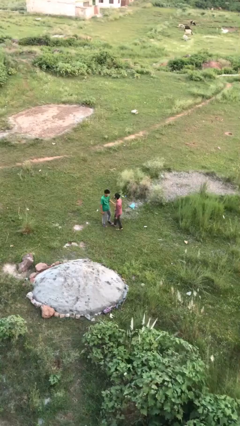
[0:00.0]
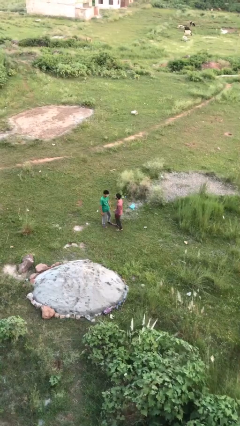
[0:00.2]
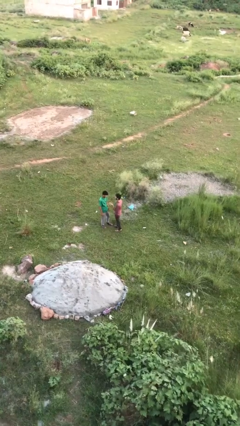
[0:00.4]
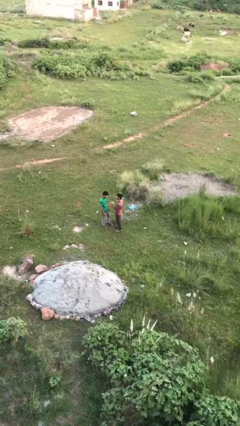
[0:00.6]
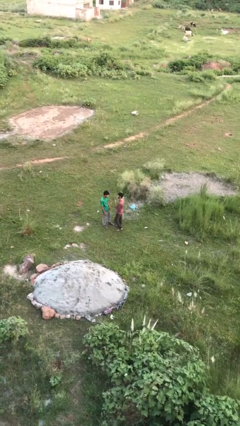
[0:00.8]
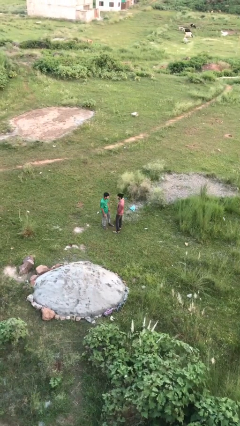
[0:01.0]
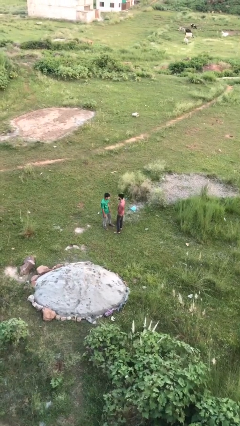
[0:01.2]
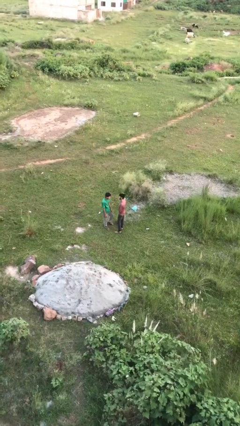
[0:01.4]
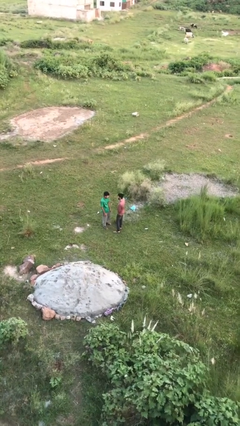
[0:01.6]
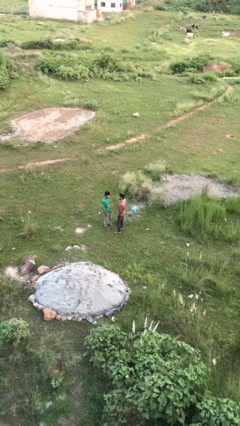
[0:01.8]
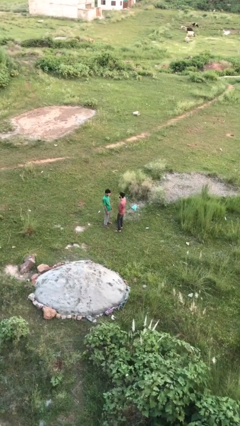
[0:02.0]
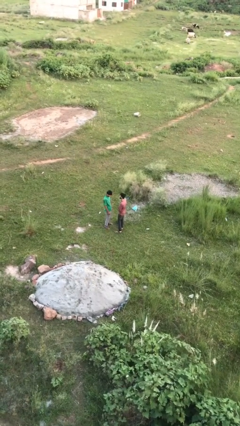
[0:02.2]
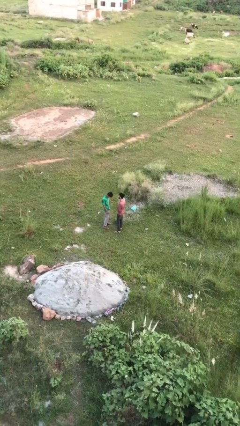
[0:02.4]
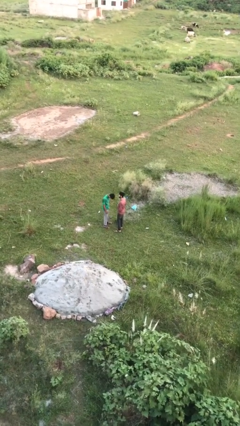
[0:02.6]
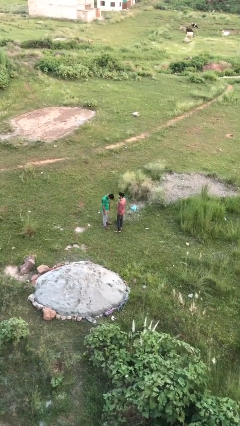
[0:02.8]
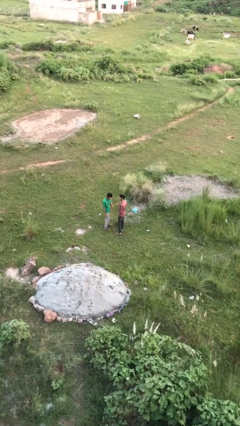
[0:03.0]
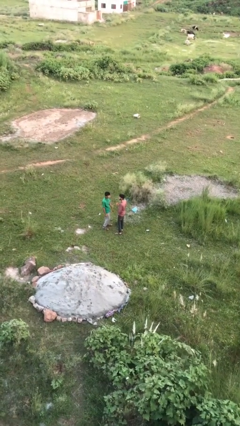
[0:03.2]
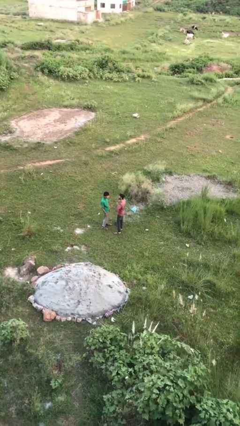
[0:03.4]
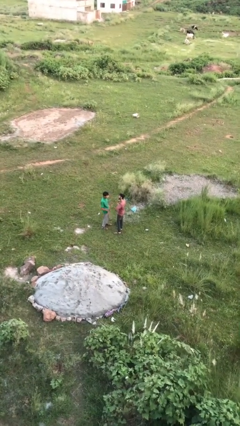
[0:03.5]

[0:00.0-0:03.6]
person talks to person

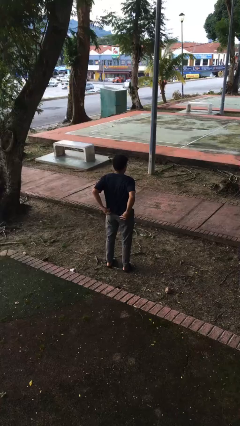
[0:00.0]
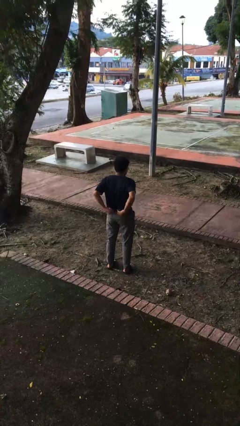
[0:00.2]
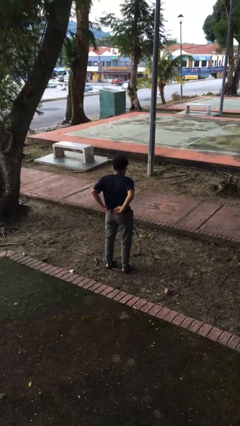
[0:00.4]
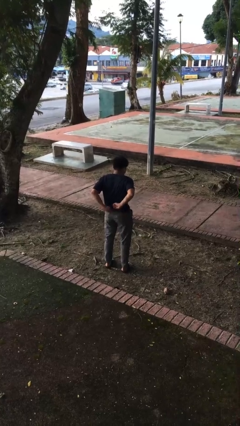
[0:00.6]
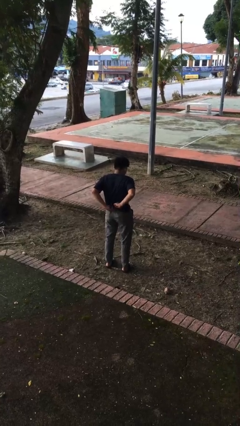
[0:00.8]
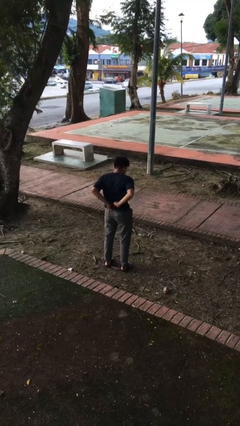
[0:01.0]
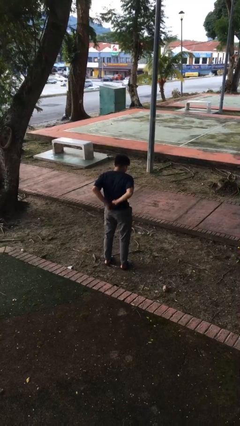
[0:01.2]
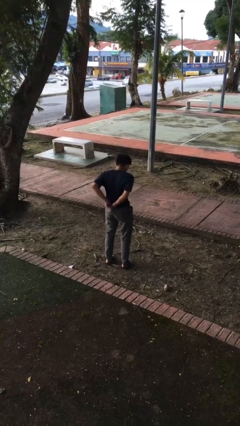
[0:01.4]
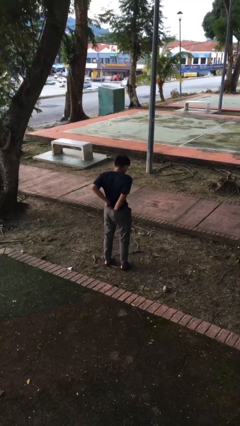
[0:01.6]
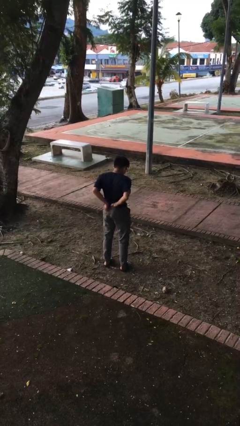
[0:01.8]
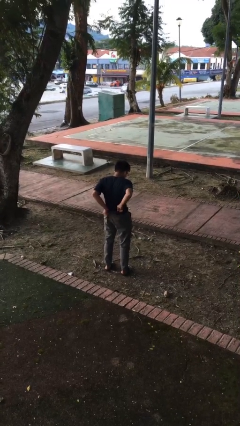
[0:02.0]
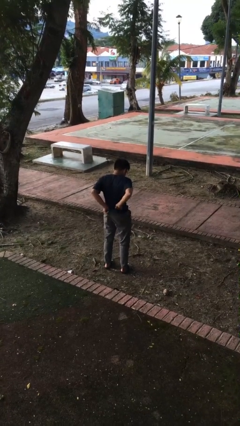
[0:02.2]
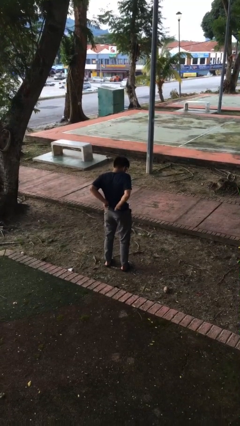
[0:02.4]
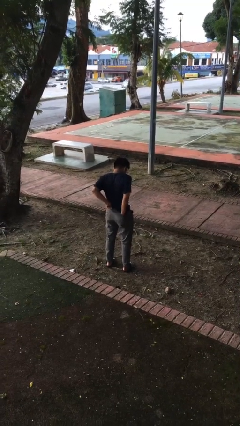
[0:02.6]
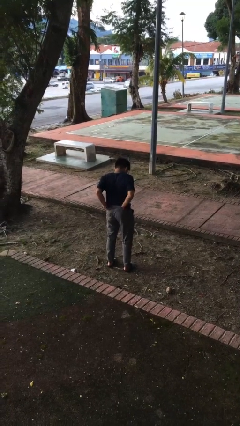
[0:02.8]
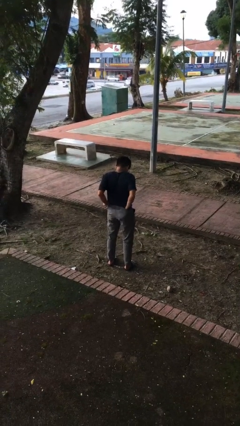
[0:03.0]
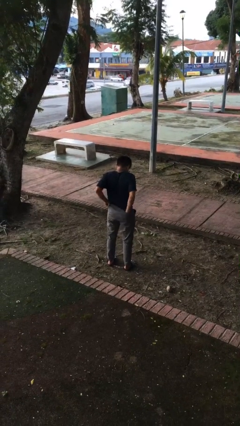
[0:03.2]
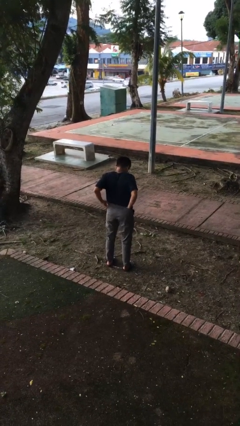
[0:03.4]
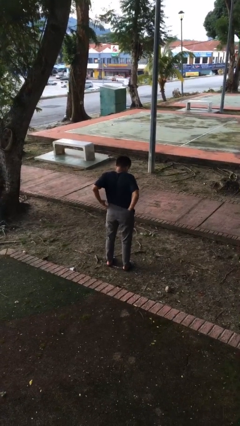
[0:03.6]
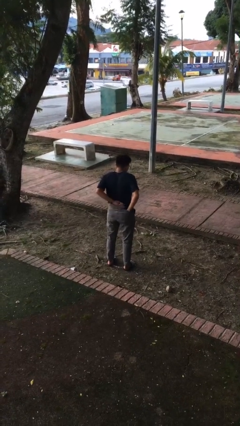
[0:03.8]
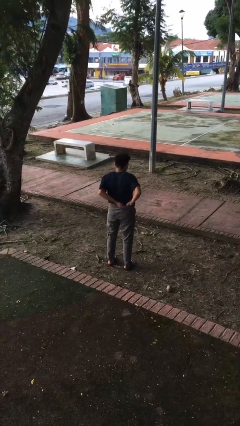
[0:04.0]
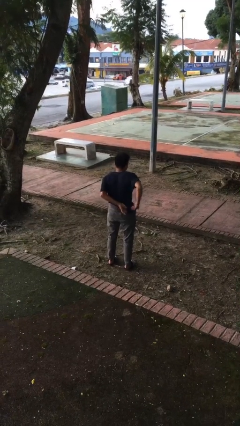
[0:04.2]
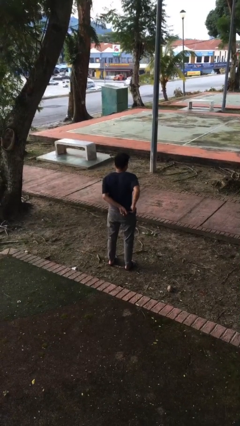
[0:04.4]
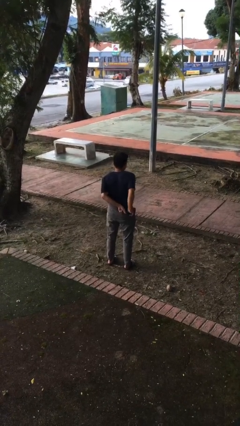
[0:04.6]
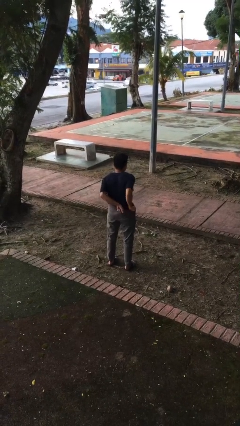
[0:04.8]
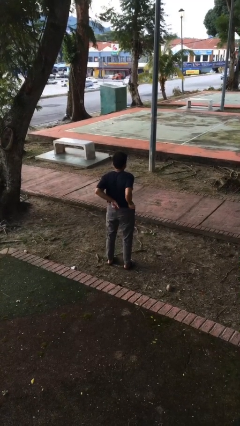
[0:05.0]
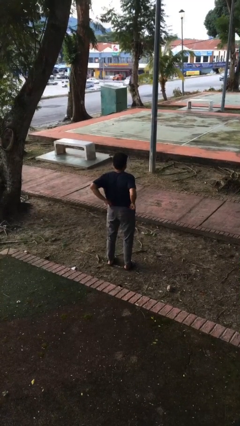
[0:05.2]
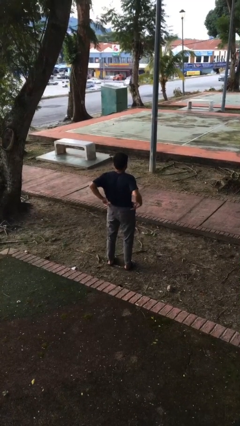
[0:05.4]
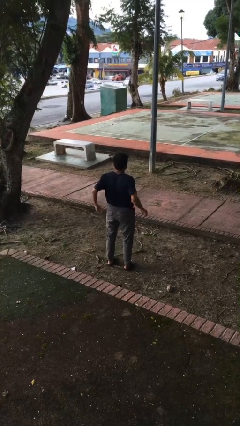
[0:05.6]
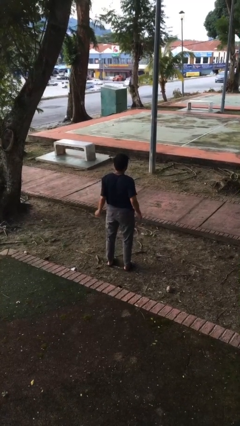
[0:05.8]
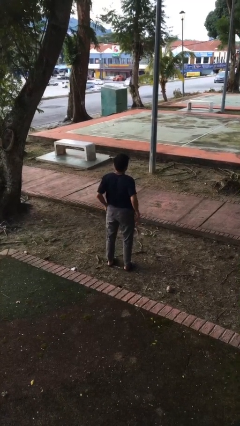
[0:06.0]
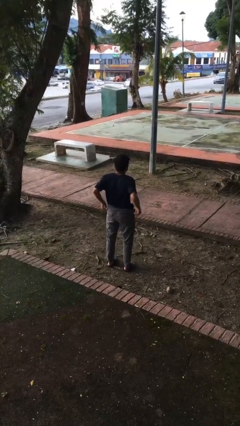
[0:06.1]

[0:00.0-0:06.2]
person tucks in shirt

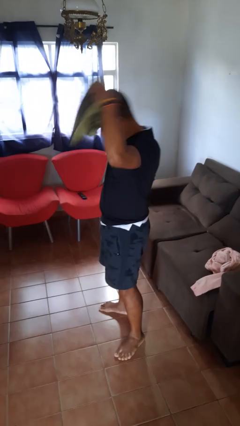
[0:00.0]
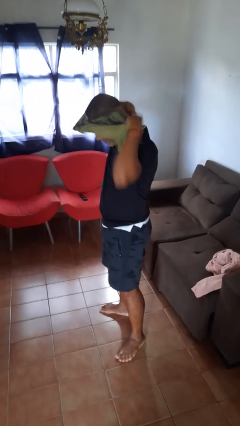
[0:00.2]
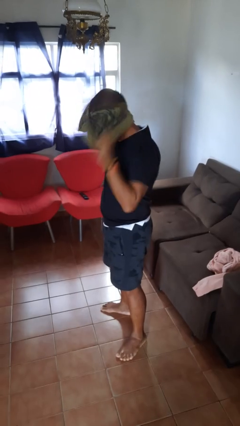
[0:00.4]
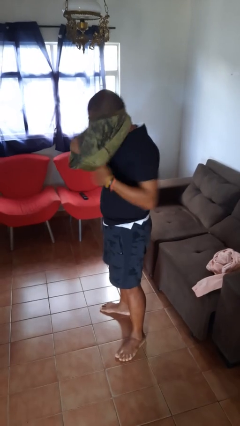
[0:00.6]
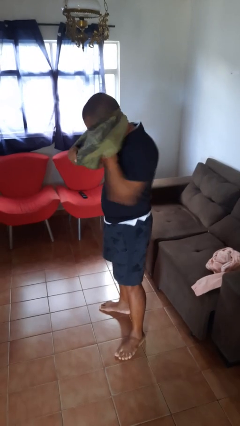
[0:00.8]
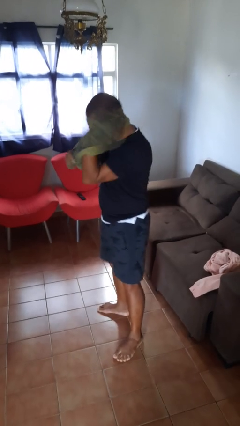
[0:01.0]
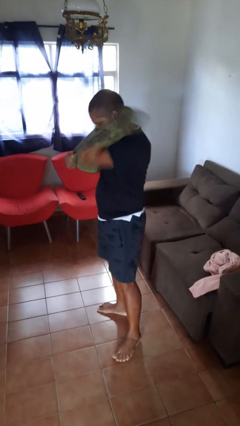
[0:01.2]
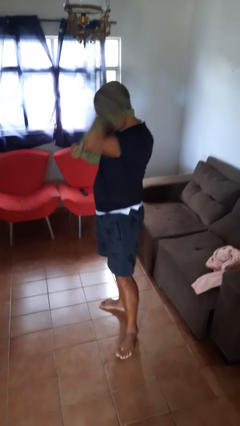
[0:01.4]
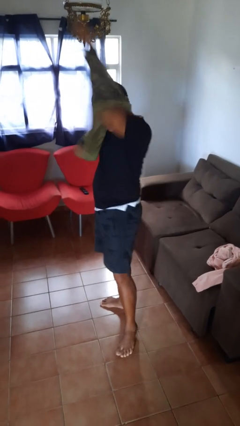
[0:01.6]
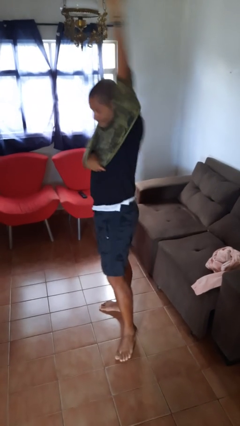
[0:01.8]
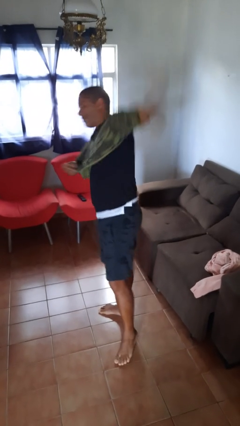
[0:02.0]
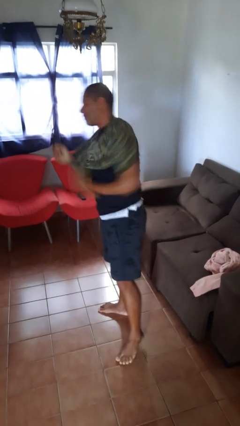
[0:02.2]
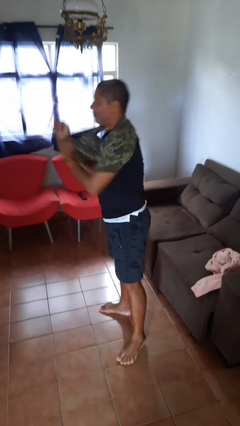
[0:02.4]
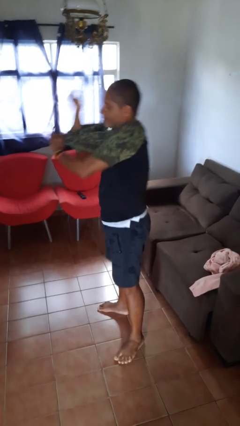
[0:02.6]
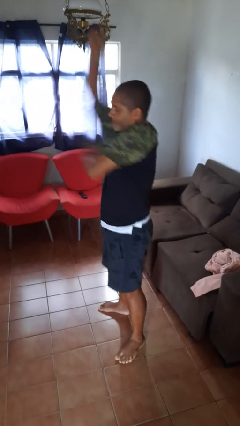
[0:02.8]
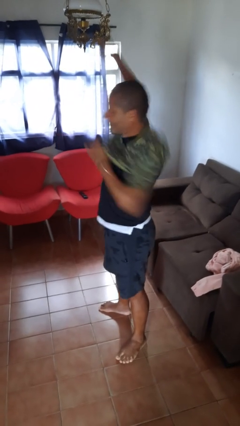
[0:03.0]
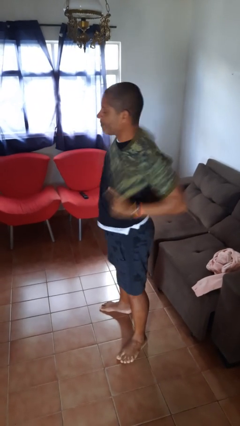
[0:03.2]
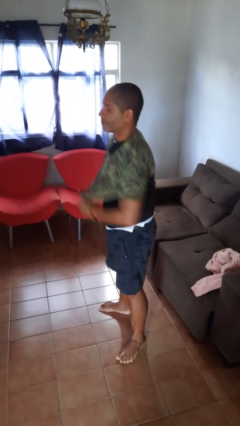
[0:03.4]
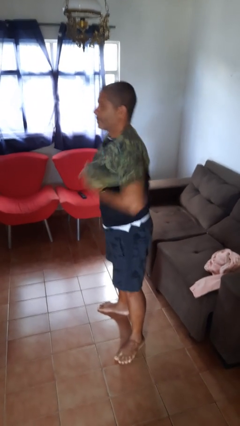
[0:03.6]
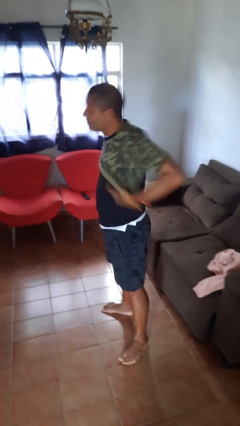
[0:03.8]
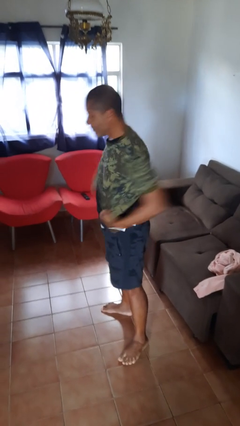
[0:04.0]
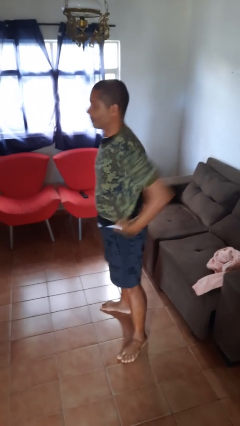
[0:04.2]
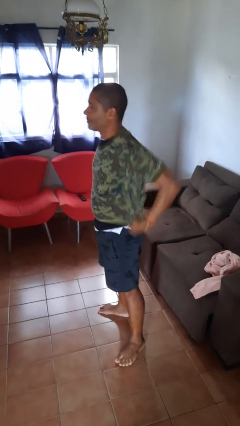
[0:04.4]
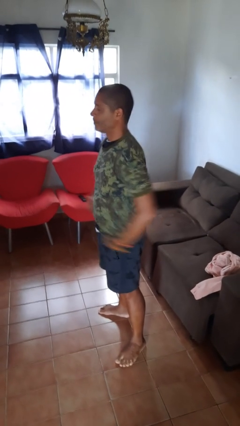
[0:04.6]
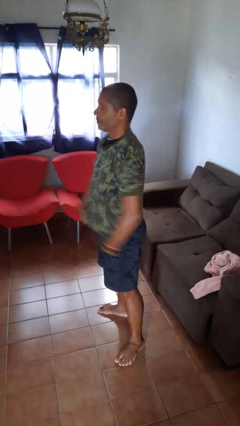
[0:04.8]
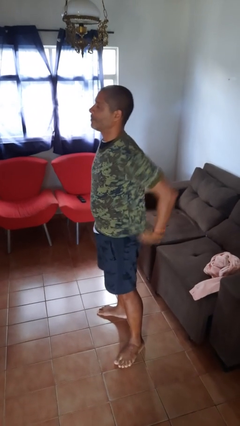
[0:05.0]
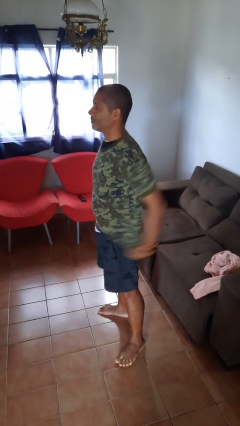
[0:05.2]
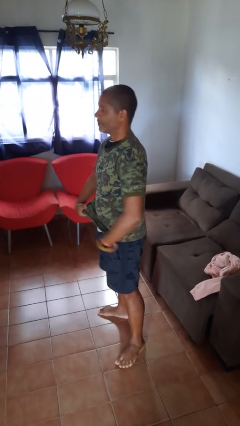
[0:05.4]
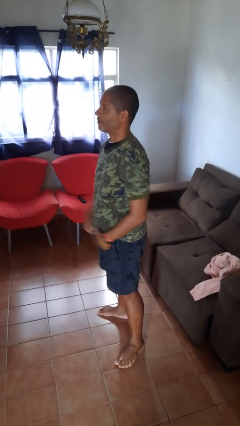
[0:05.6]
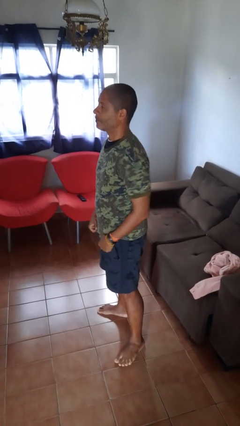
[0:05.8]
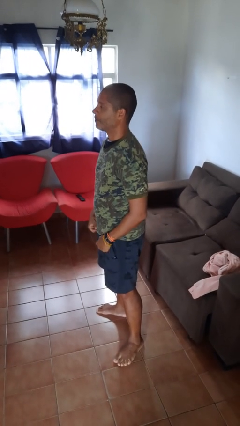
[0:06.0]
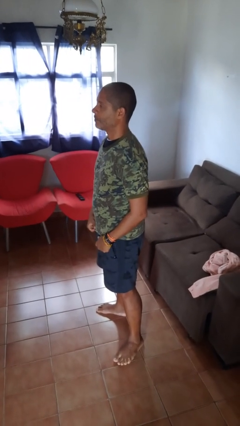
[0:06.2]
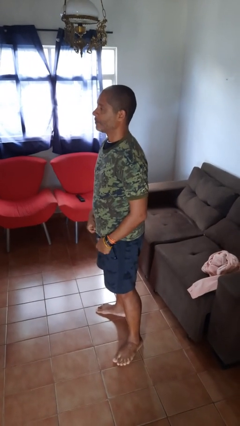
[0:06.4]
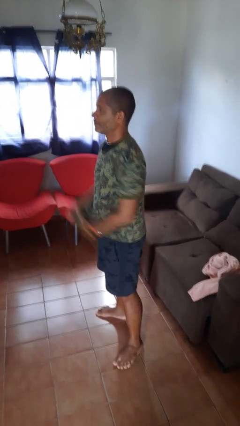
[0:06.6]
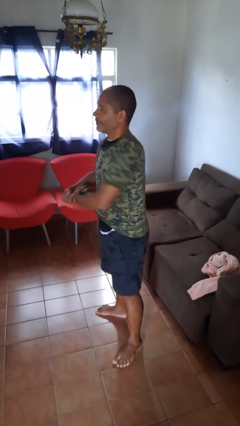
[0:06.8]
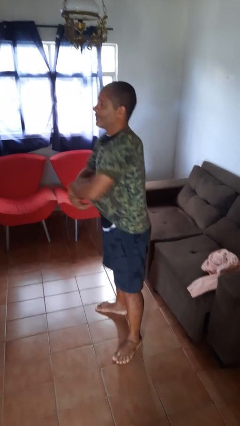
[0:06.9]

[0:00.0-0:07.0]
person puts on shirt

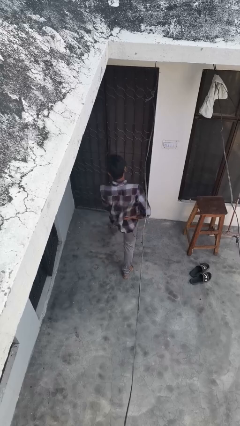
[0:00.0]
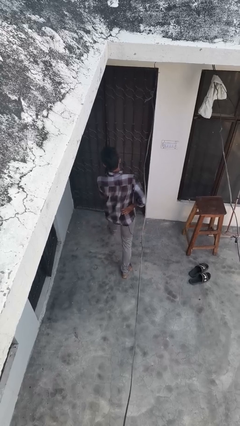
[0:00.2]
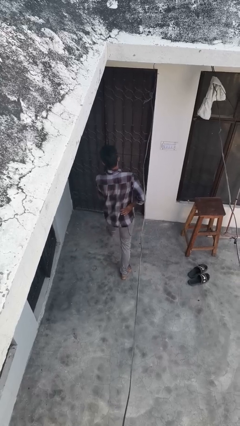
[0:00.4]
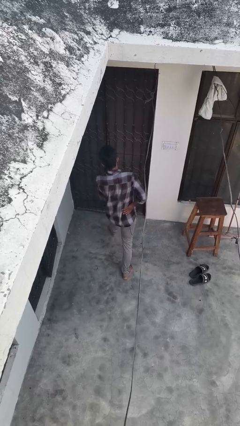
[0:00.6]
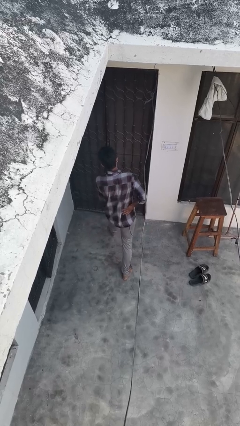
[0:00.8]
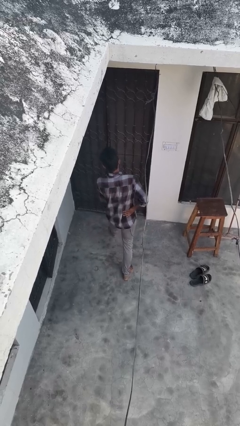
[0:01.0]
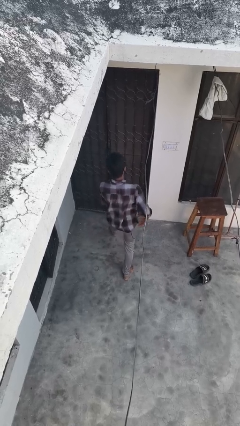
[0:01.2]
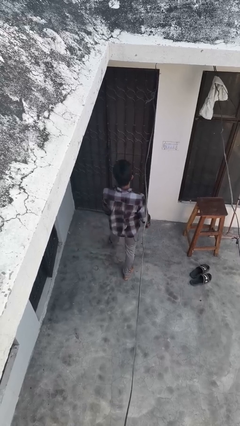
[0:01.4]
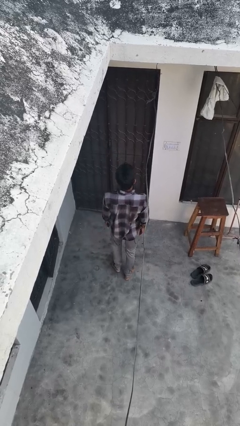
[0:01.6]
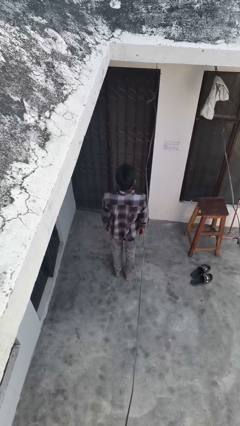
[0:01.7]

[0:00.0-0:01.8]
person exercises with lunges
